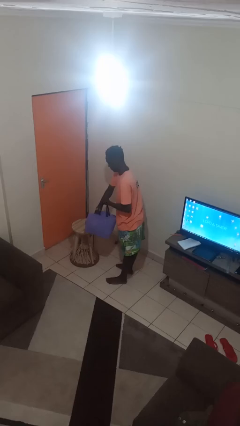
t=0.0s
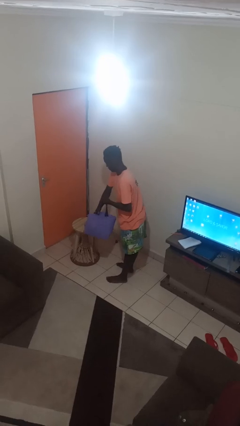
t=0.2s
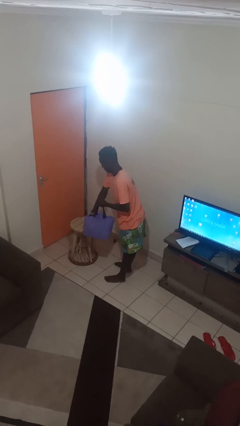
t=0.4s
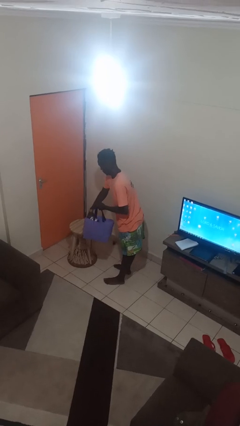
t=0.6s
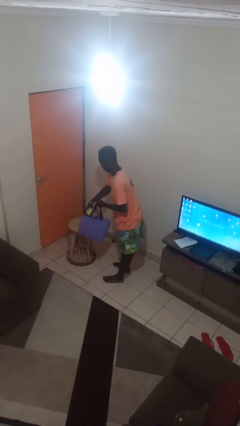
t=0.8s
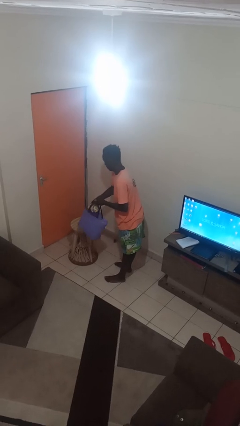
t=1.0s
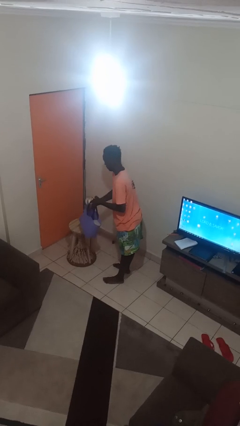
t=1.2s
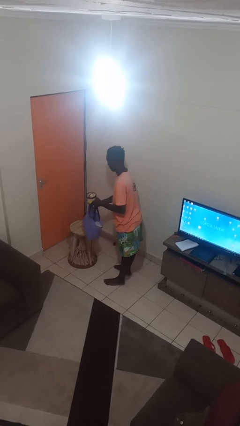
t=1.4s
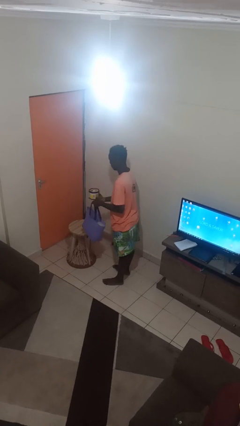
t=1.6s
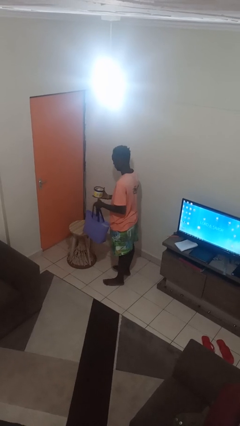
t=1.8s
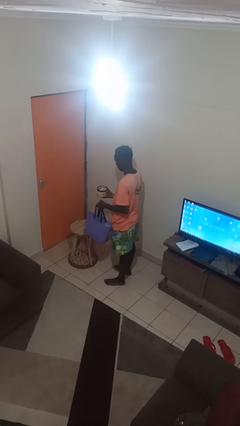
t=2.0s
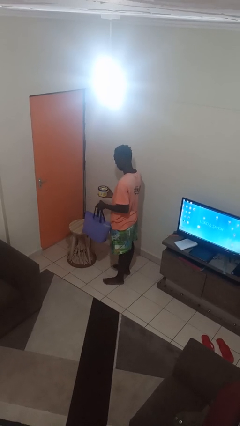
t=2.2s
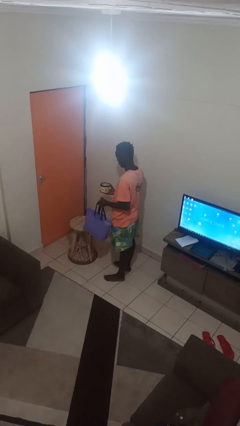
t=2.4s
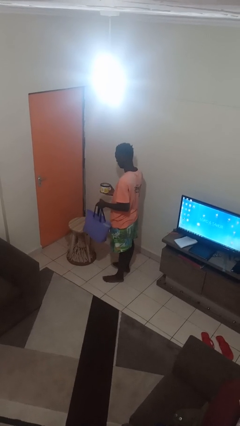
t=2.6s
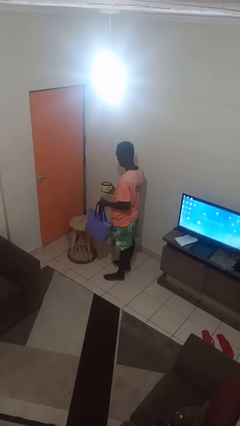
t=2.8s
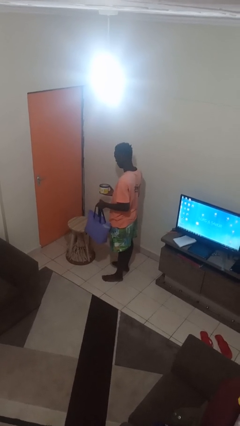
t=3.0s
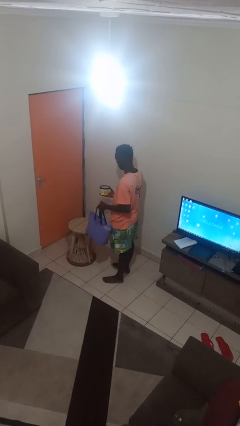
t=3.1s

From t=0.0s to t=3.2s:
person takes object from bag

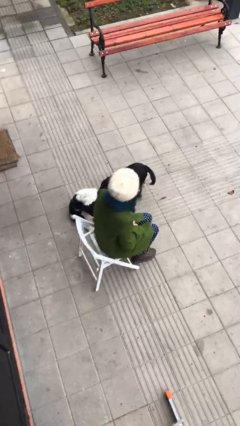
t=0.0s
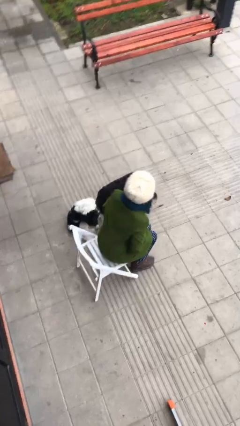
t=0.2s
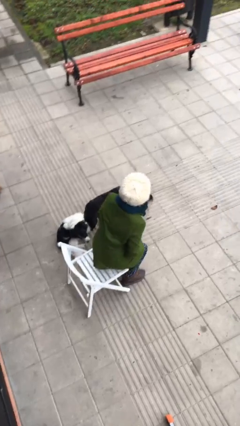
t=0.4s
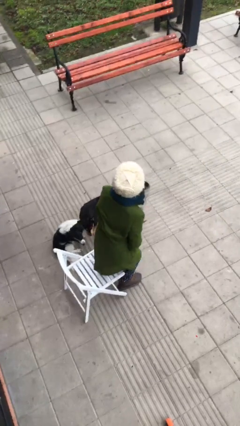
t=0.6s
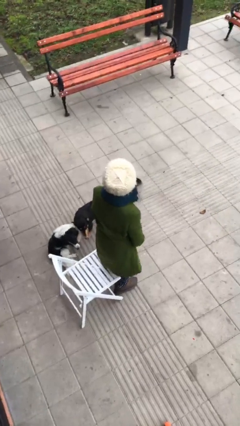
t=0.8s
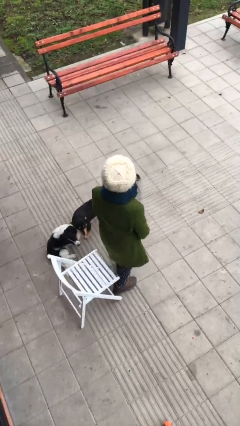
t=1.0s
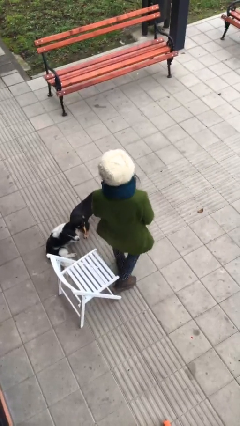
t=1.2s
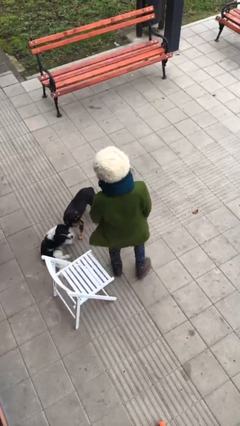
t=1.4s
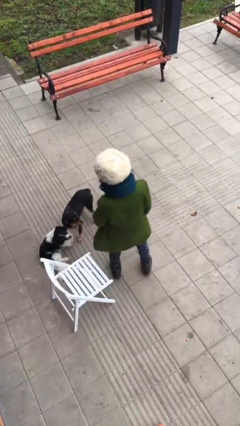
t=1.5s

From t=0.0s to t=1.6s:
person stands up

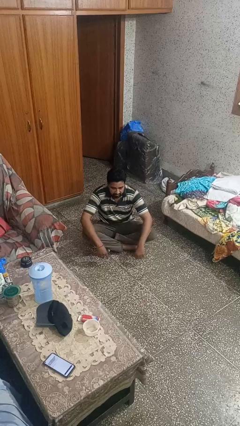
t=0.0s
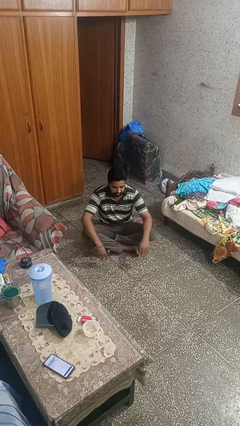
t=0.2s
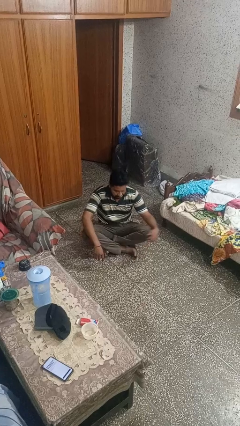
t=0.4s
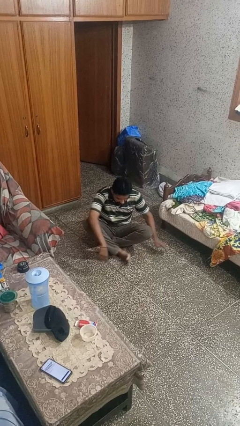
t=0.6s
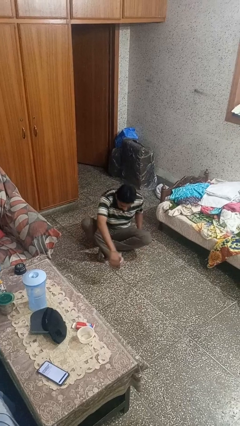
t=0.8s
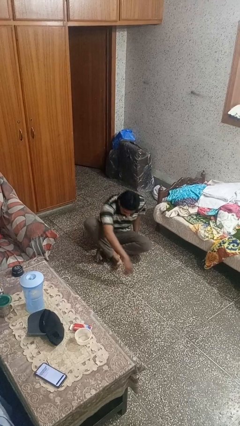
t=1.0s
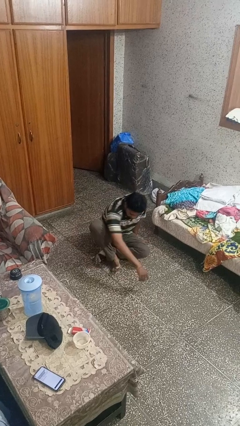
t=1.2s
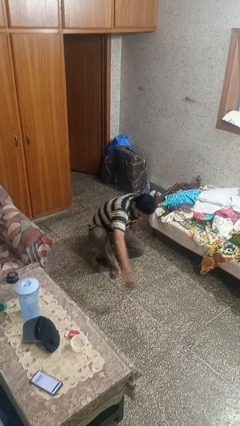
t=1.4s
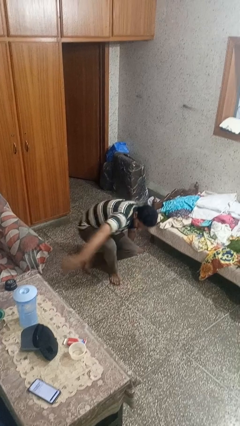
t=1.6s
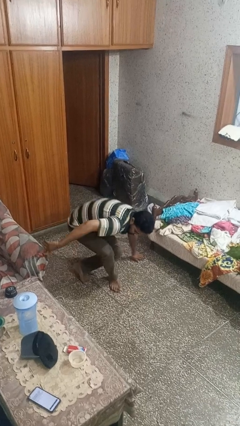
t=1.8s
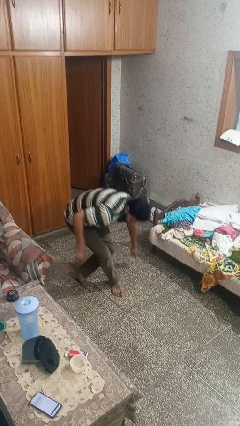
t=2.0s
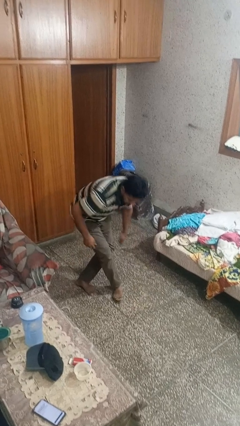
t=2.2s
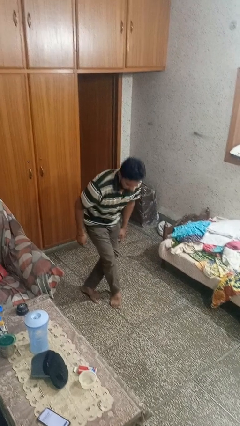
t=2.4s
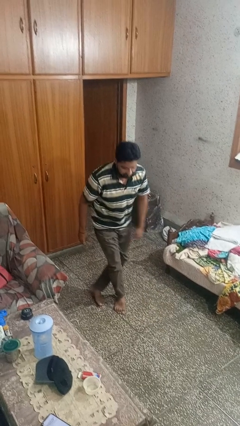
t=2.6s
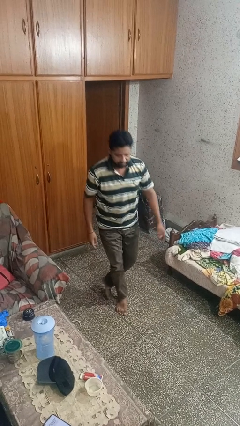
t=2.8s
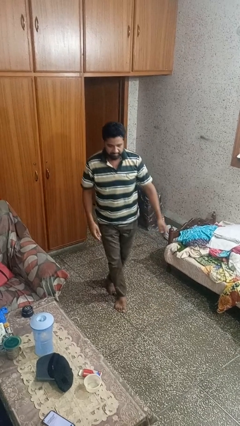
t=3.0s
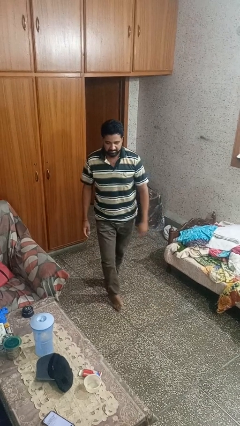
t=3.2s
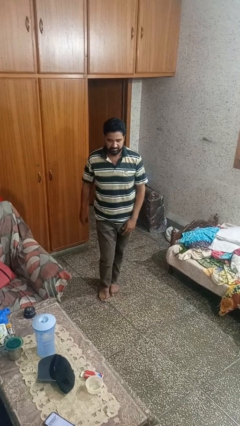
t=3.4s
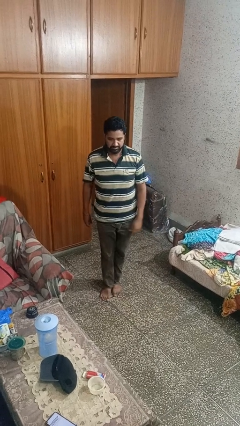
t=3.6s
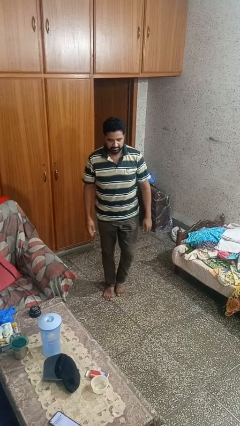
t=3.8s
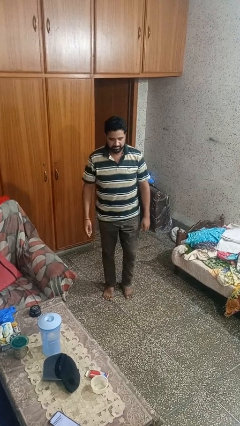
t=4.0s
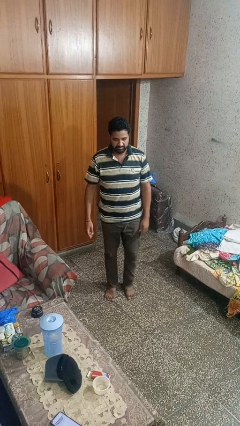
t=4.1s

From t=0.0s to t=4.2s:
person stands up from floor

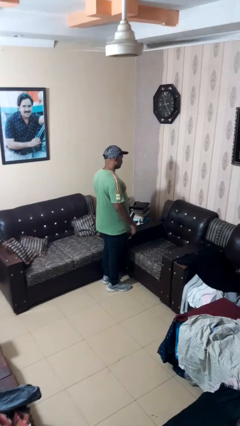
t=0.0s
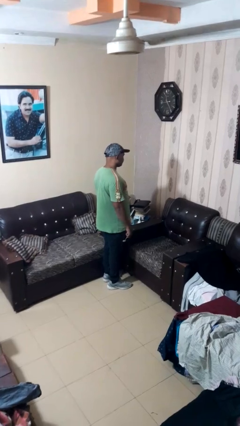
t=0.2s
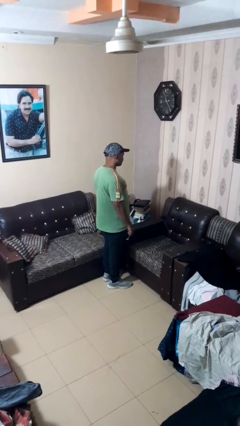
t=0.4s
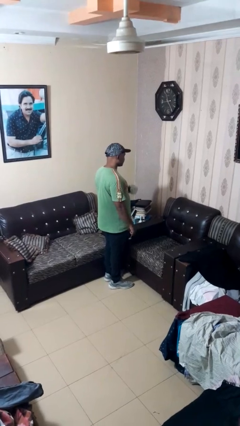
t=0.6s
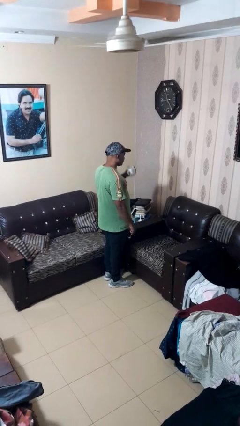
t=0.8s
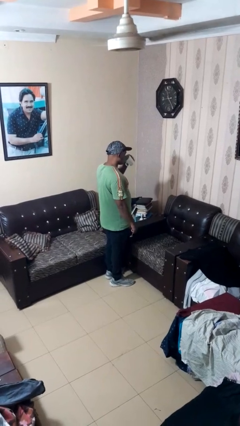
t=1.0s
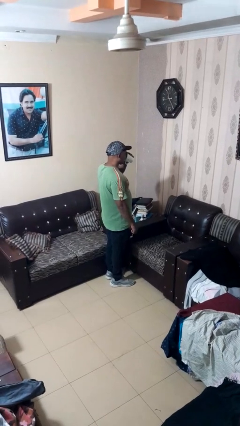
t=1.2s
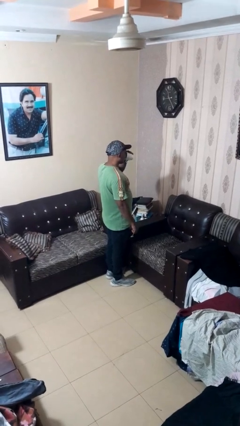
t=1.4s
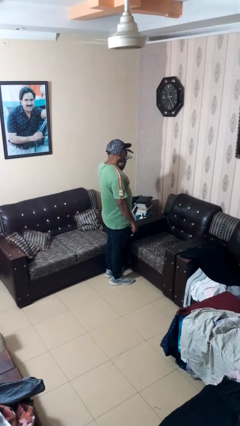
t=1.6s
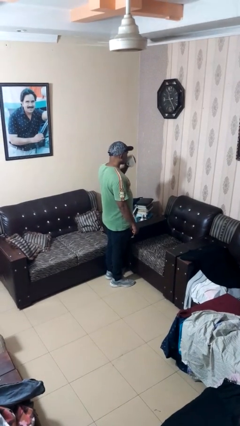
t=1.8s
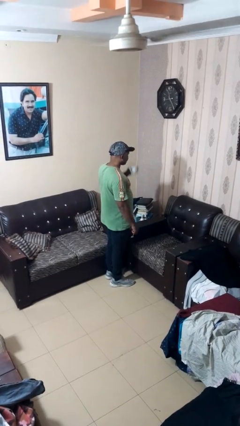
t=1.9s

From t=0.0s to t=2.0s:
person drinks from mug

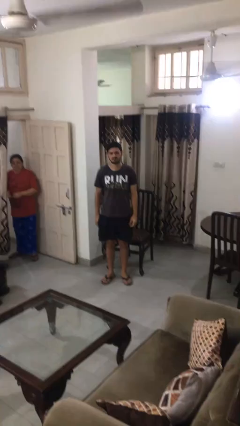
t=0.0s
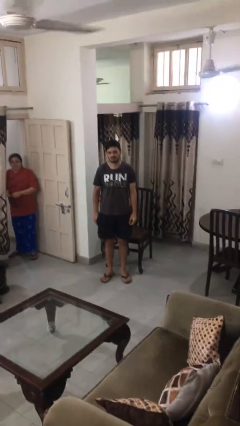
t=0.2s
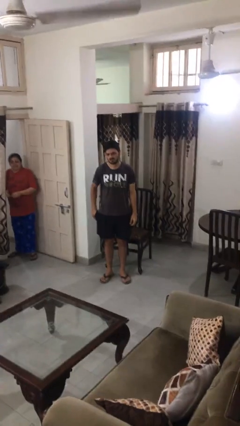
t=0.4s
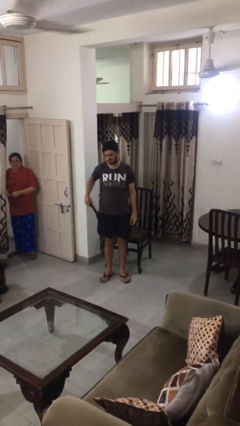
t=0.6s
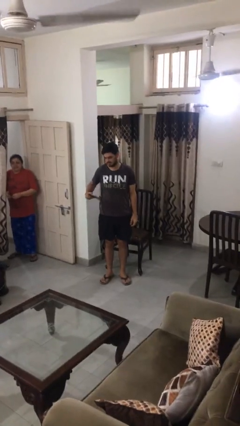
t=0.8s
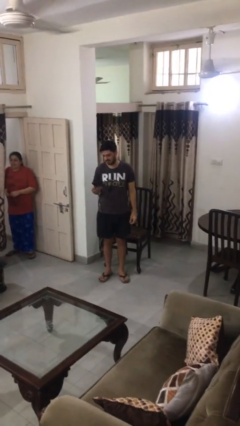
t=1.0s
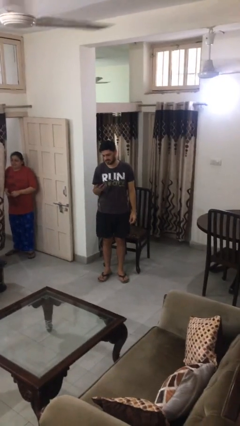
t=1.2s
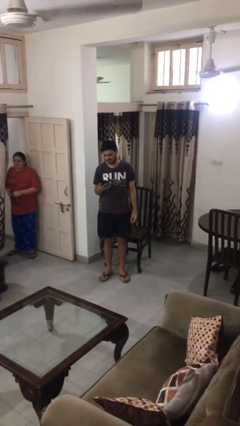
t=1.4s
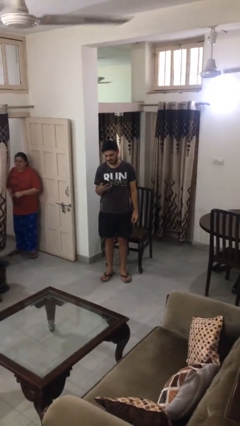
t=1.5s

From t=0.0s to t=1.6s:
person takes phone from pocket

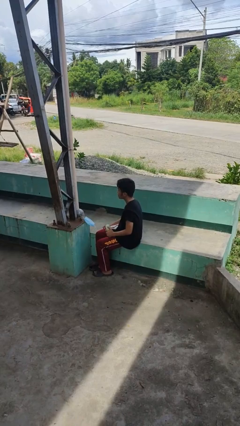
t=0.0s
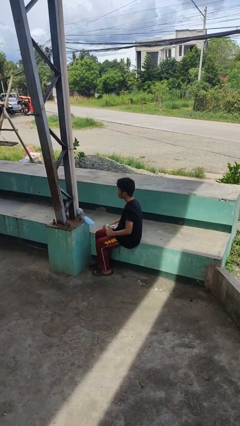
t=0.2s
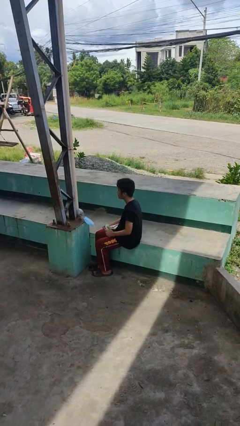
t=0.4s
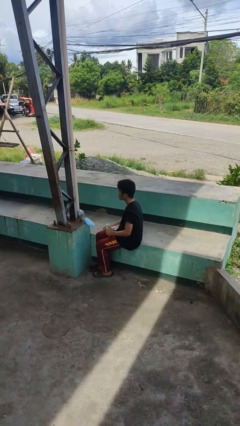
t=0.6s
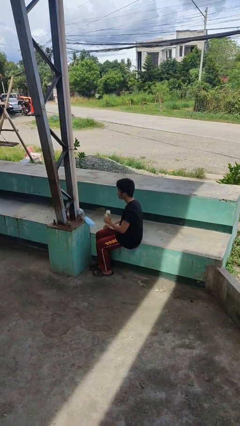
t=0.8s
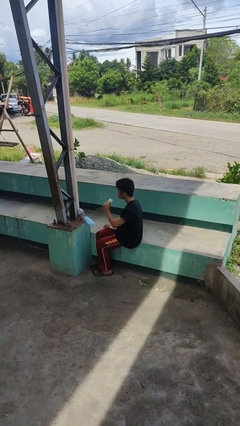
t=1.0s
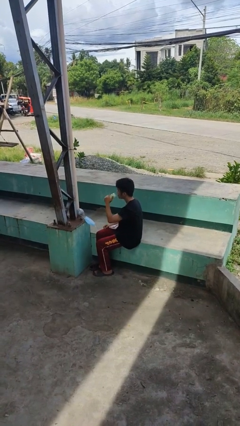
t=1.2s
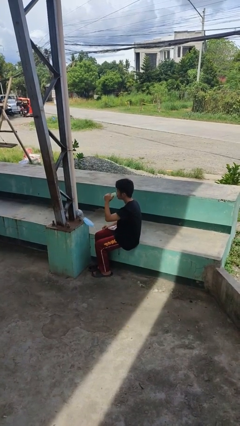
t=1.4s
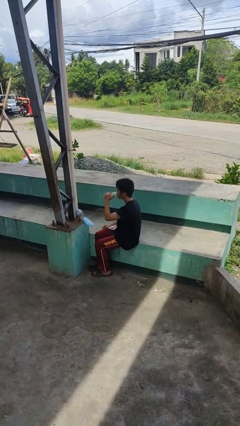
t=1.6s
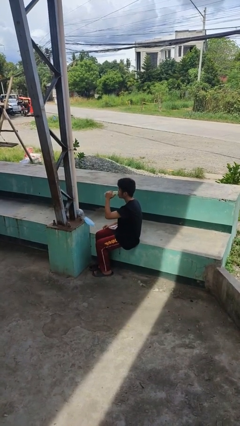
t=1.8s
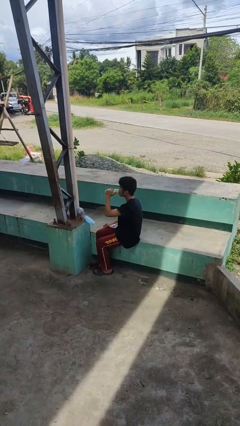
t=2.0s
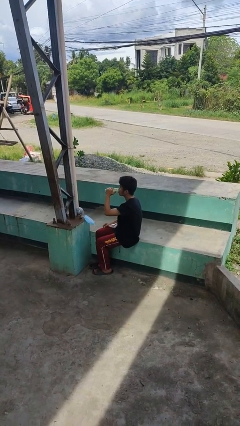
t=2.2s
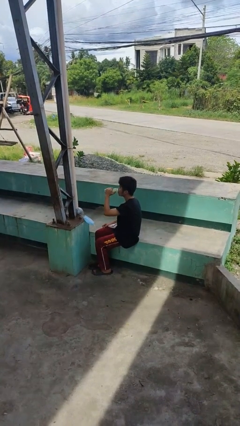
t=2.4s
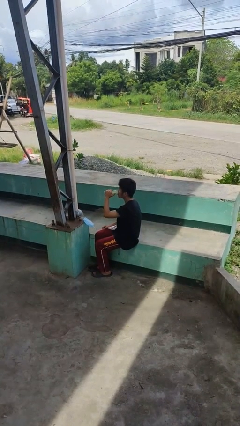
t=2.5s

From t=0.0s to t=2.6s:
person interacts with tablet

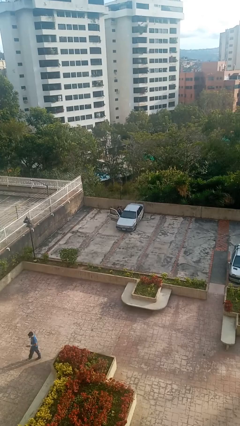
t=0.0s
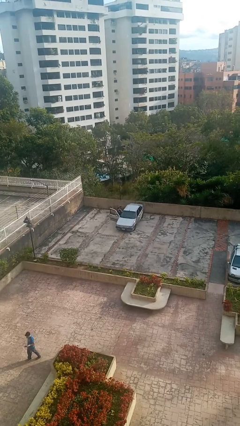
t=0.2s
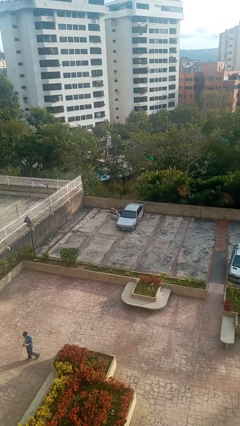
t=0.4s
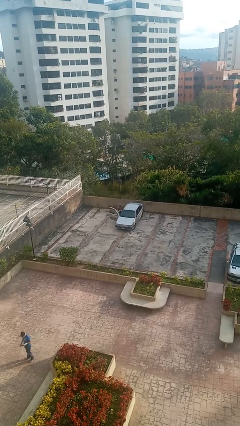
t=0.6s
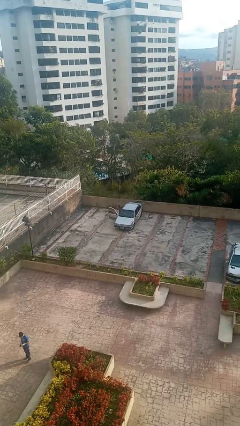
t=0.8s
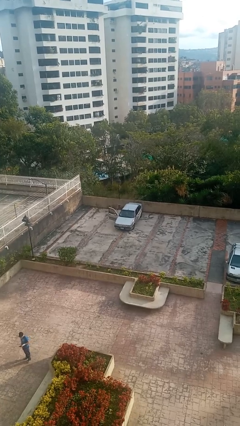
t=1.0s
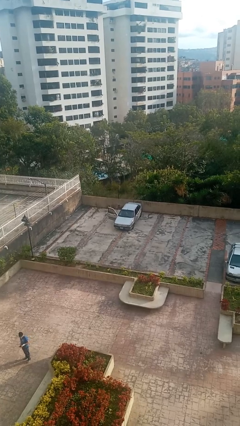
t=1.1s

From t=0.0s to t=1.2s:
person enters car

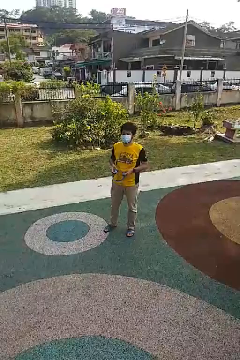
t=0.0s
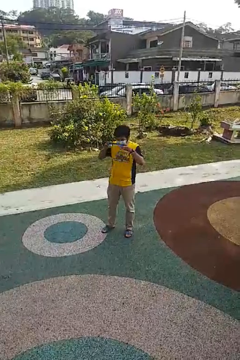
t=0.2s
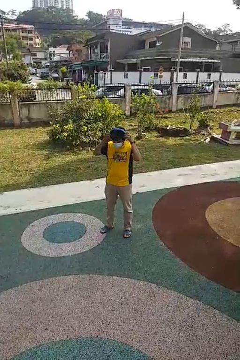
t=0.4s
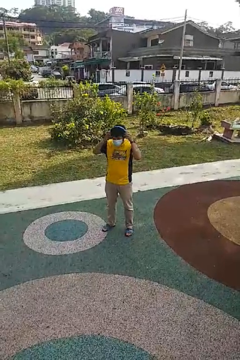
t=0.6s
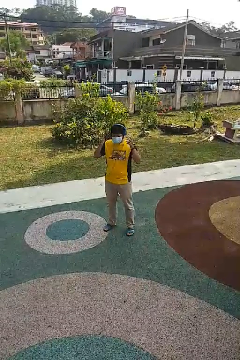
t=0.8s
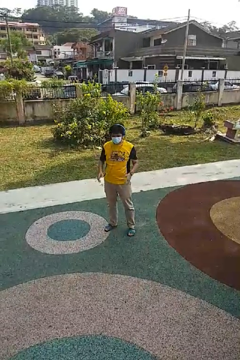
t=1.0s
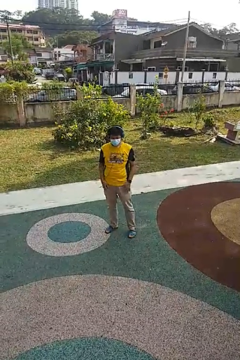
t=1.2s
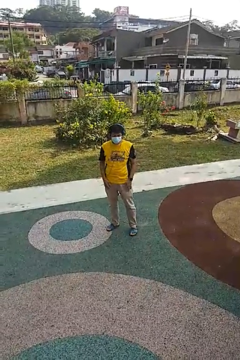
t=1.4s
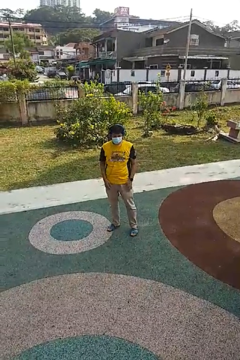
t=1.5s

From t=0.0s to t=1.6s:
person puts on headphones
